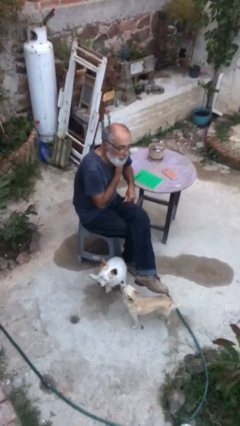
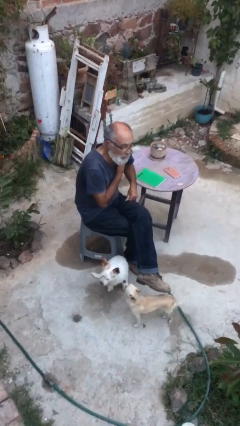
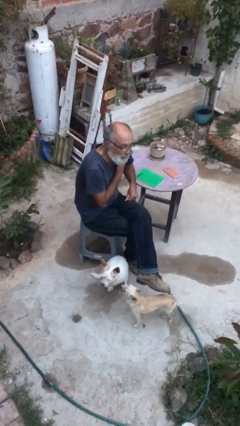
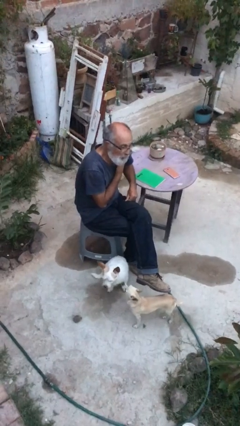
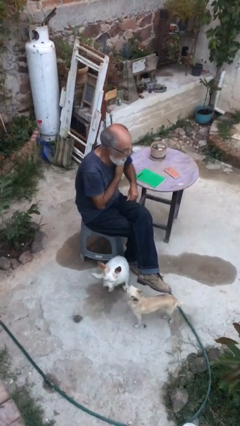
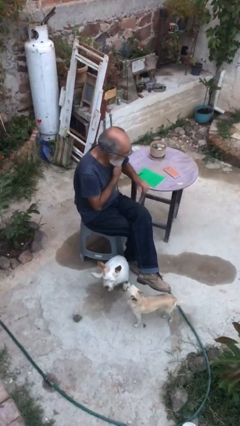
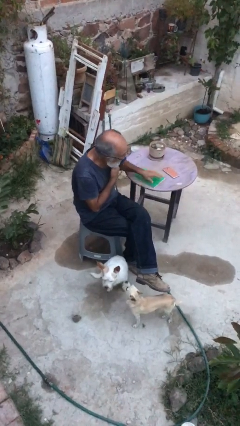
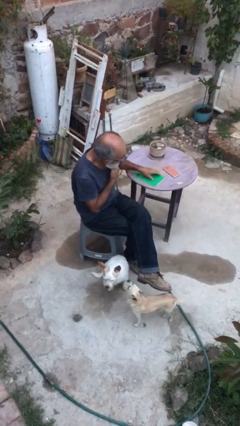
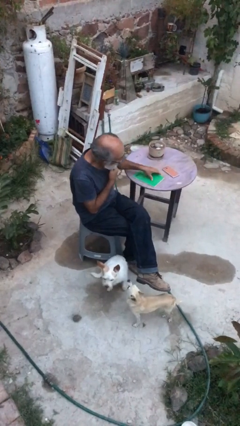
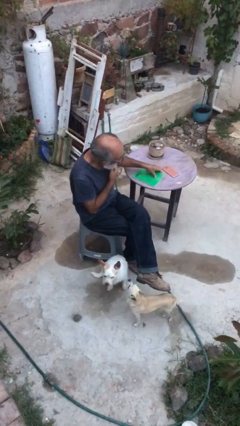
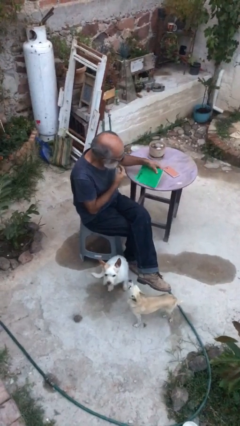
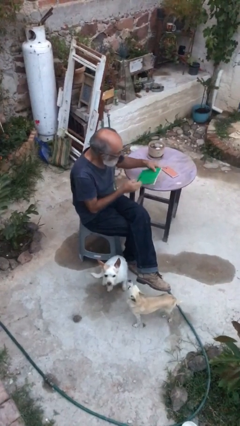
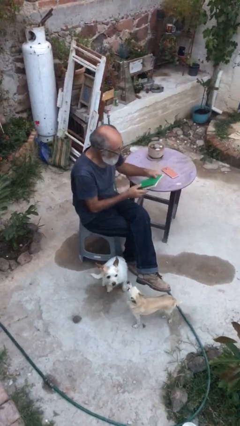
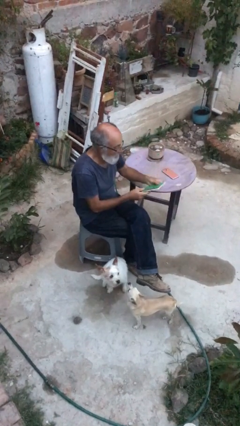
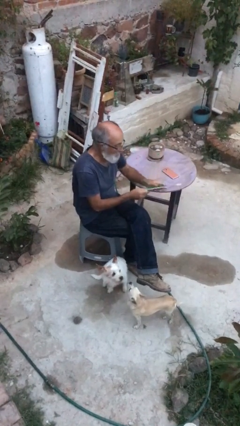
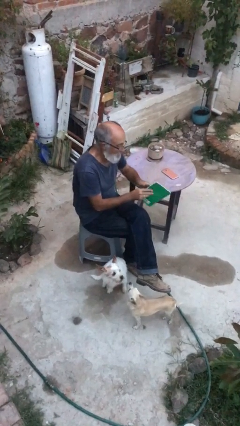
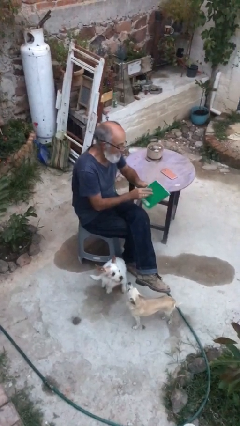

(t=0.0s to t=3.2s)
person picks up object from table

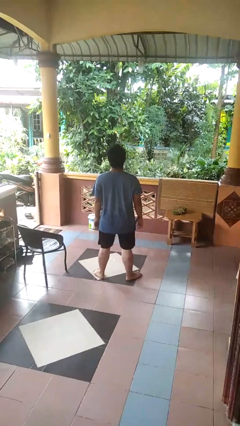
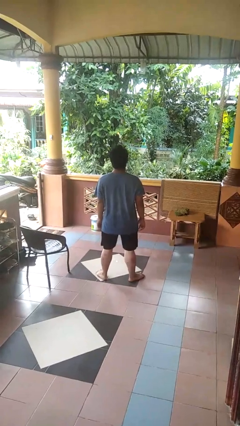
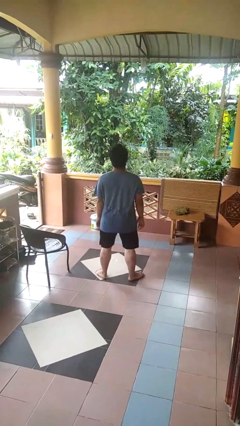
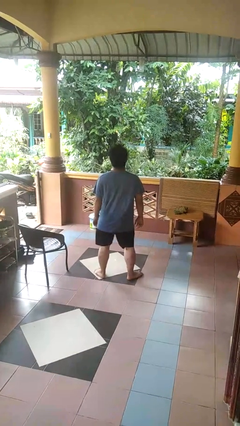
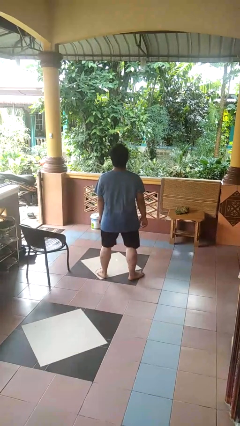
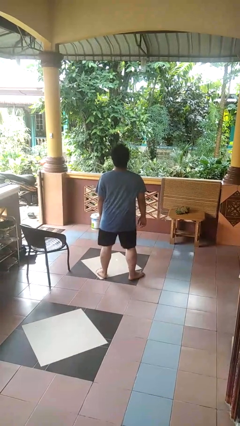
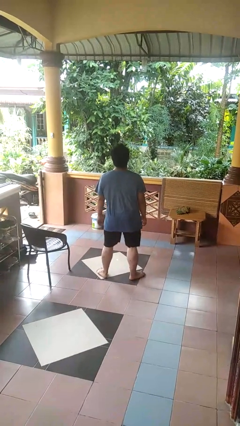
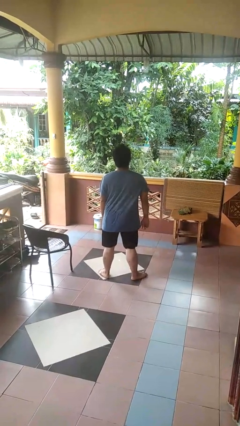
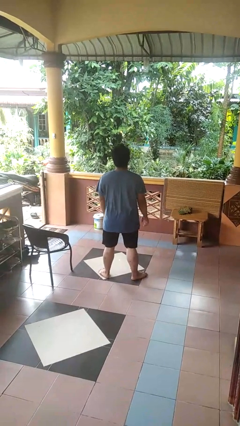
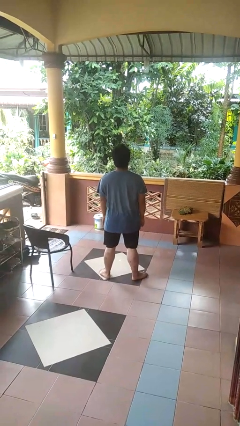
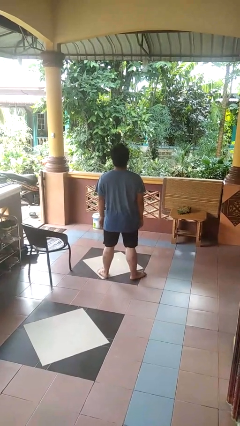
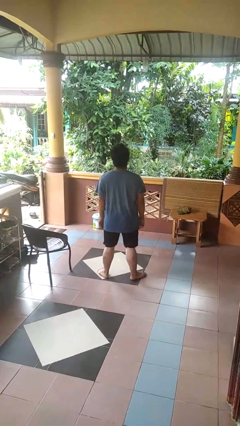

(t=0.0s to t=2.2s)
person wiggles hips

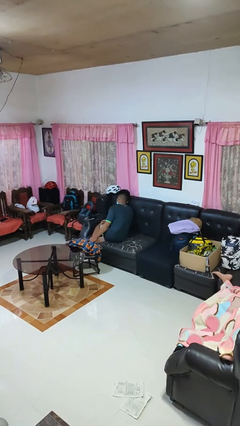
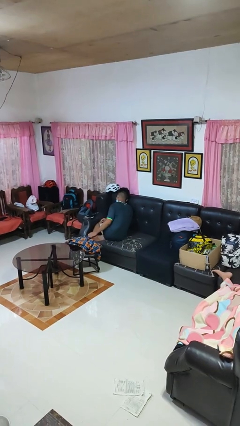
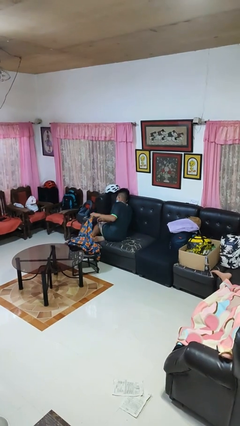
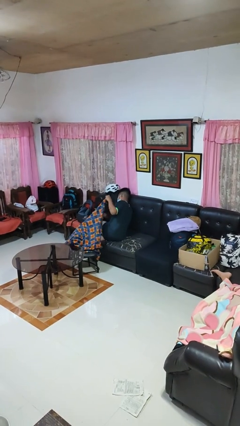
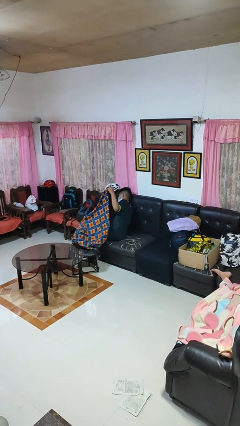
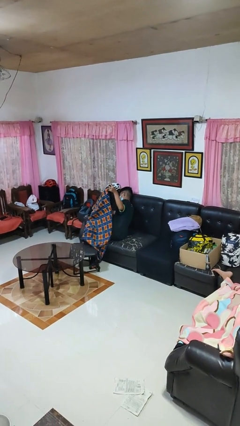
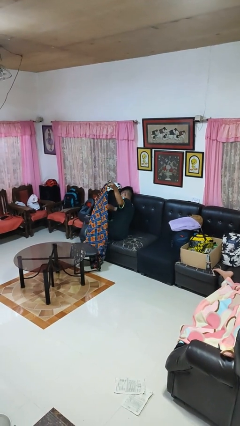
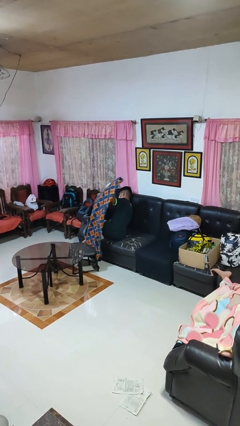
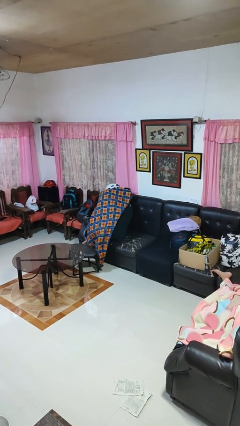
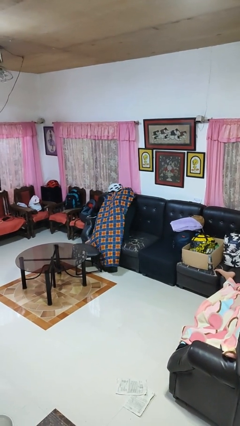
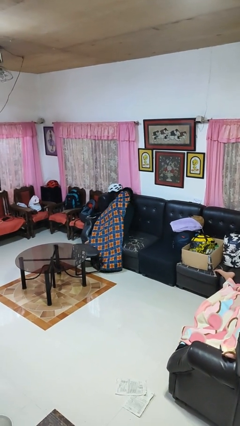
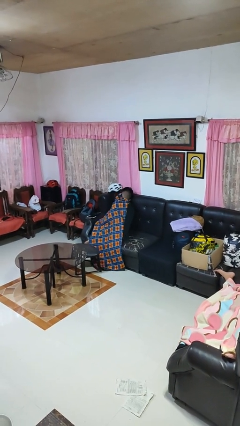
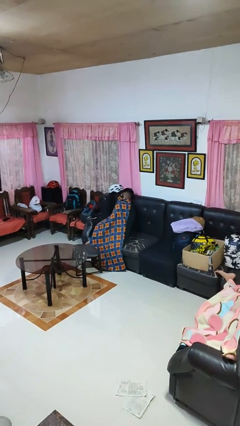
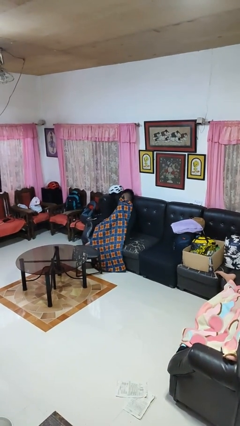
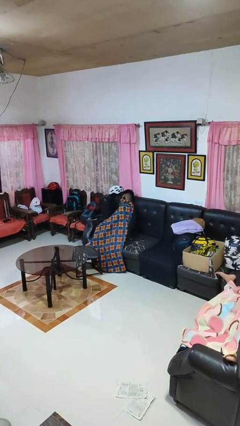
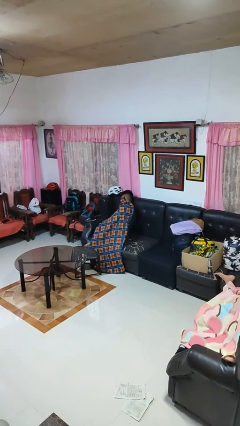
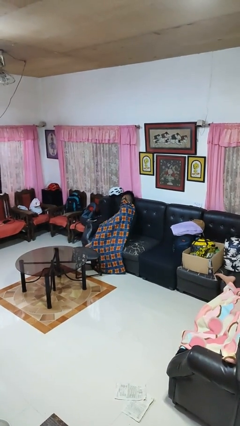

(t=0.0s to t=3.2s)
person covers with blanket

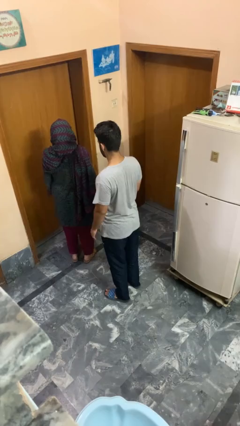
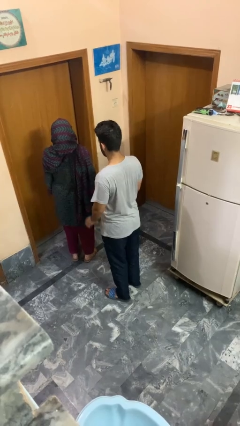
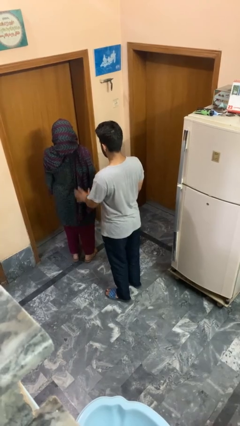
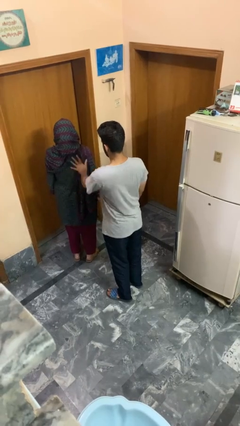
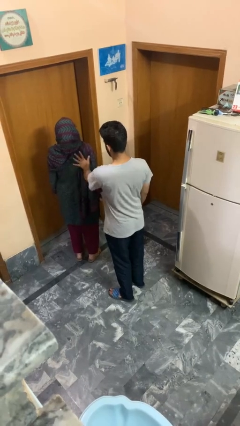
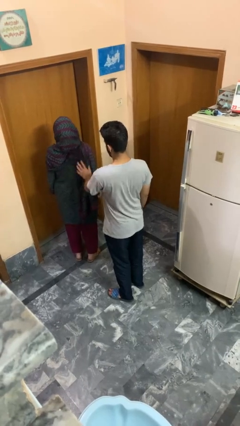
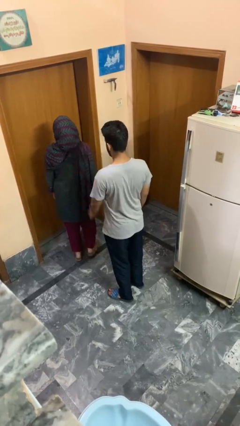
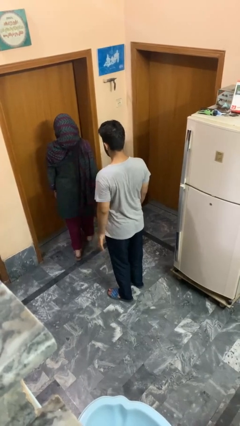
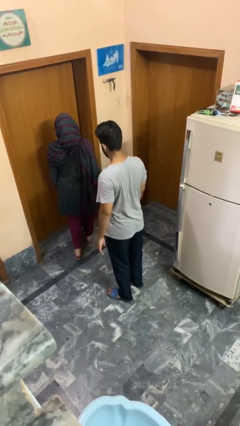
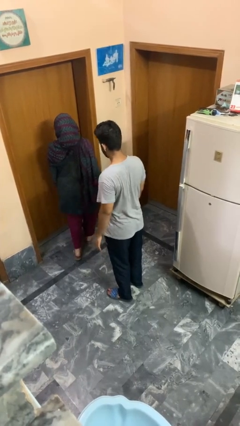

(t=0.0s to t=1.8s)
person shoves person

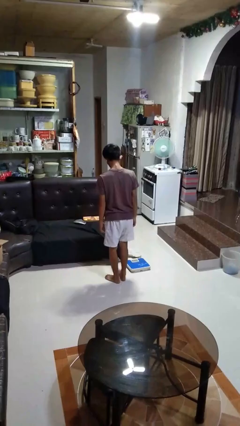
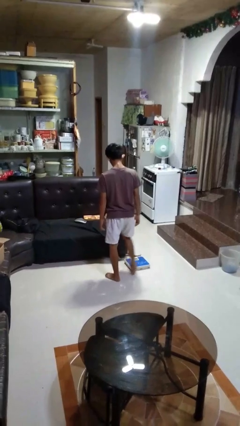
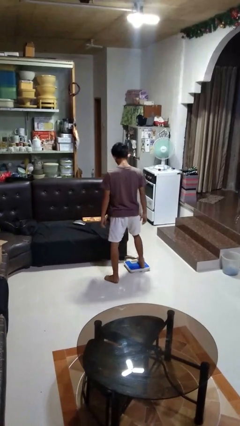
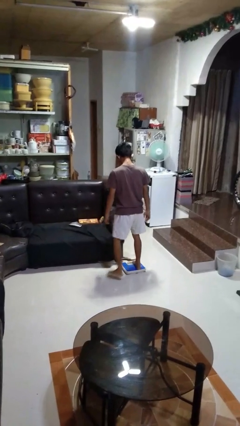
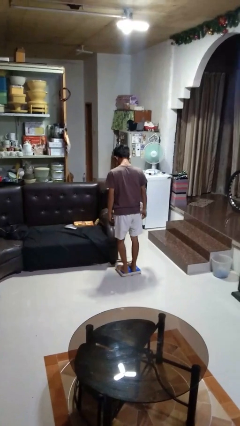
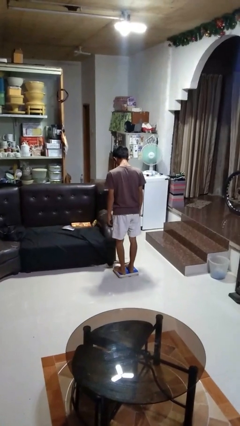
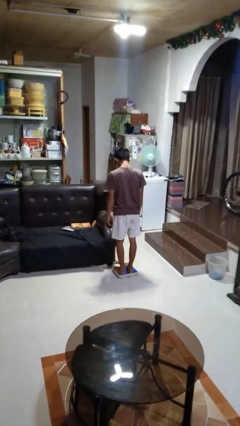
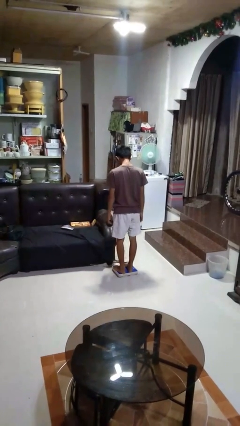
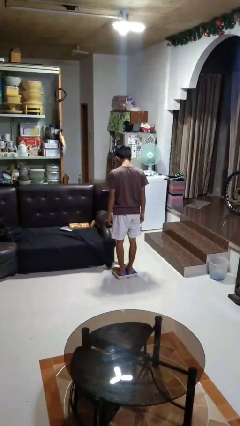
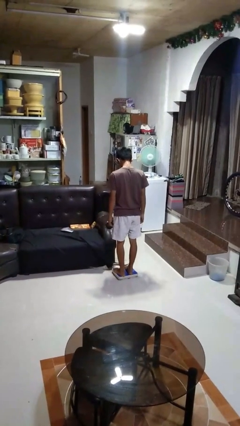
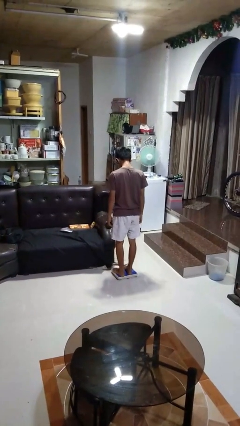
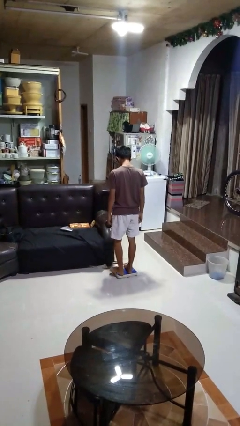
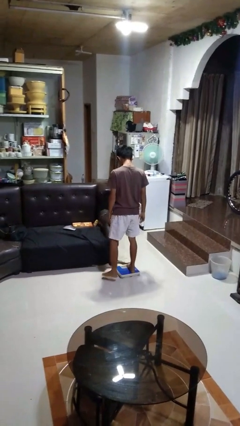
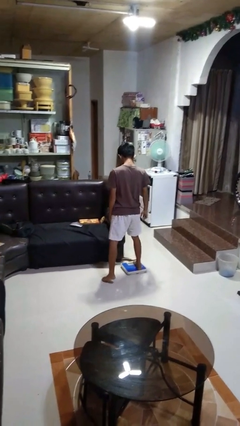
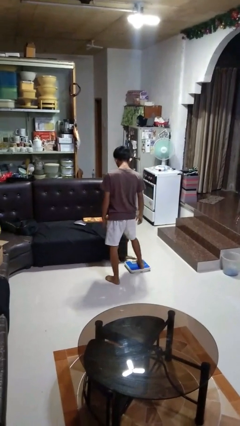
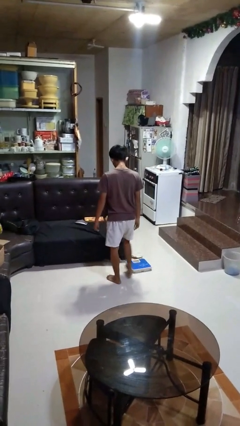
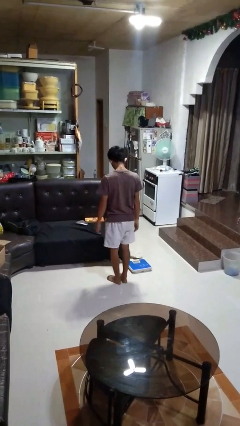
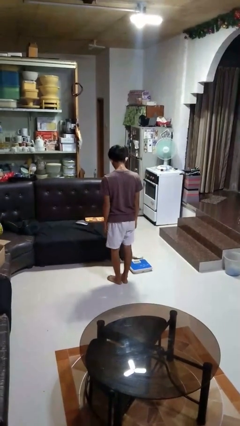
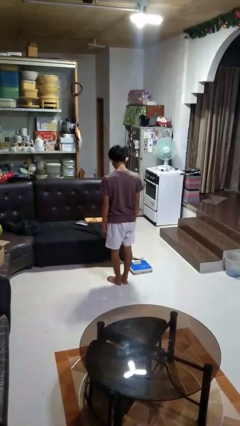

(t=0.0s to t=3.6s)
person uses bodyweight scale

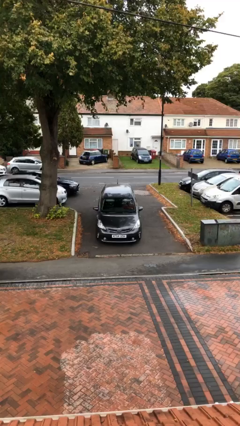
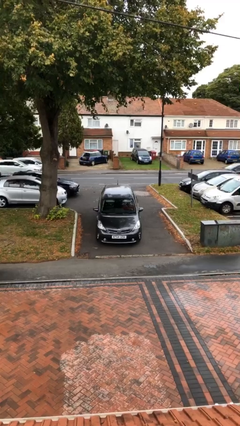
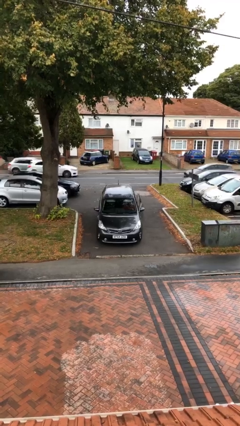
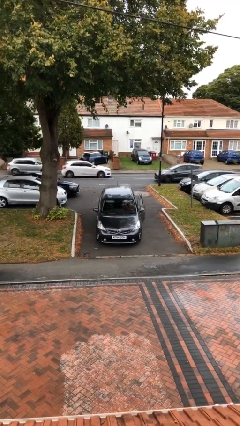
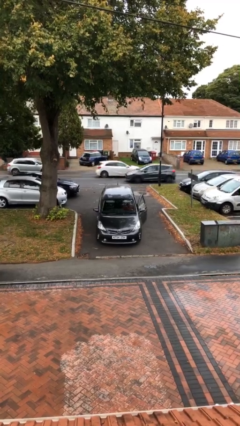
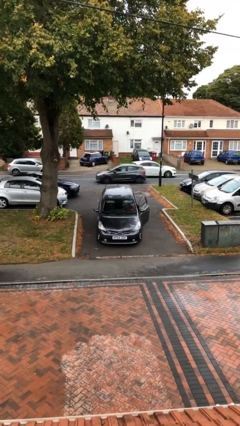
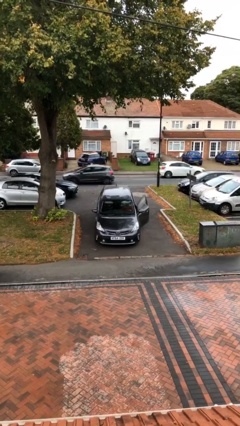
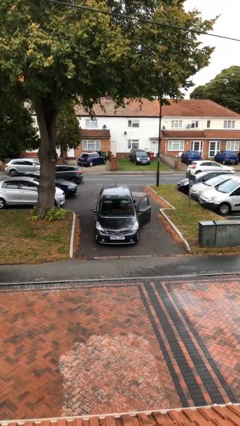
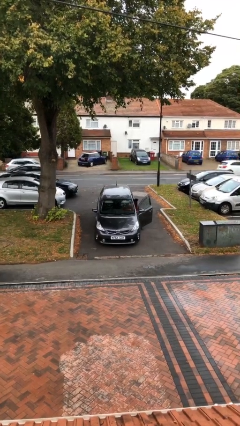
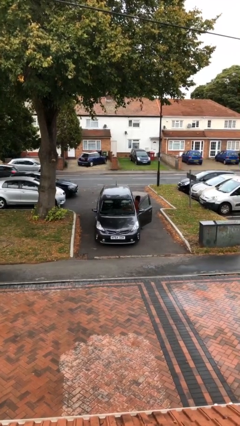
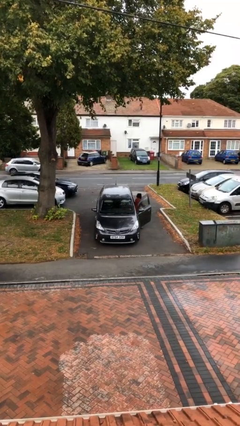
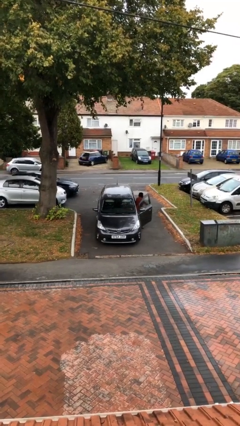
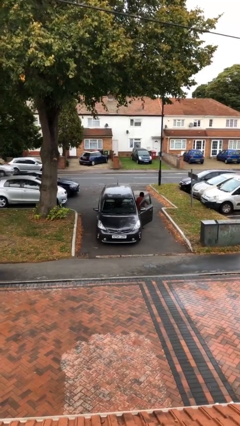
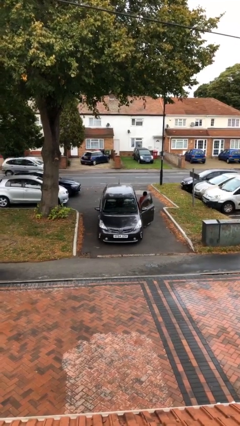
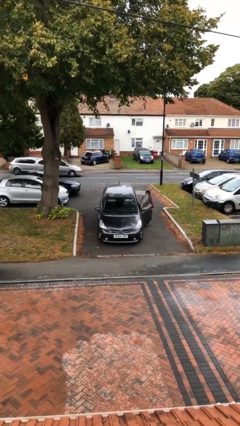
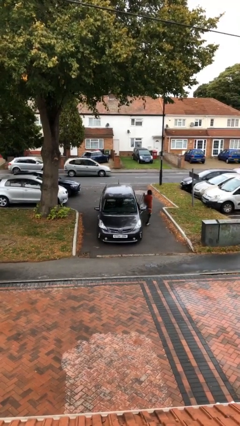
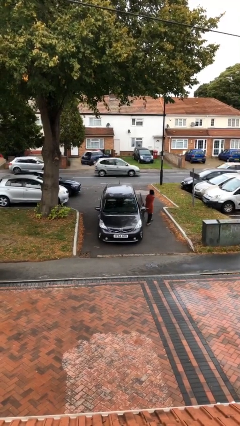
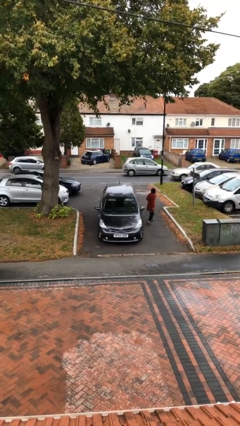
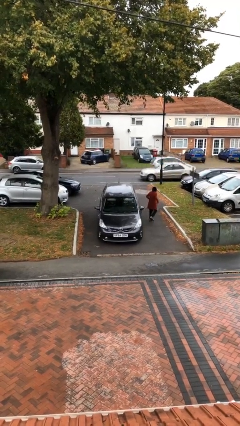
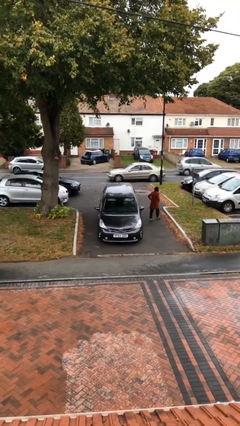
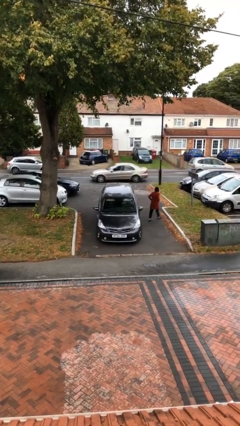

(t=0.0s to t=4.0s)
car drops off person
